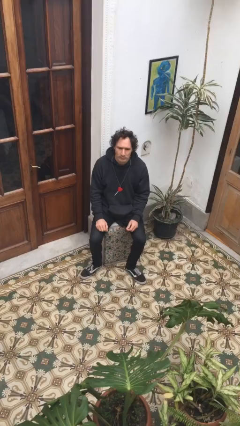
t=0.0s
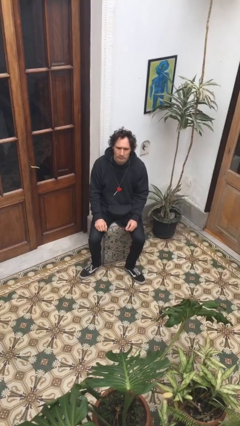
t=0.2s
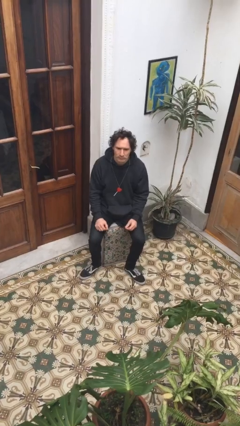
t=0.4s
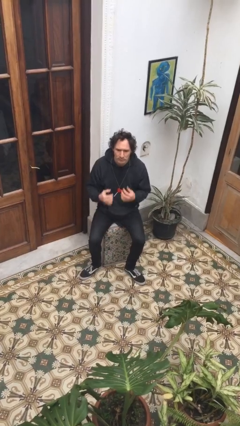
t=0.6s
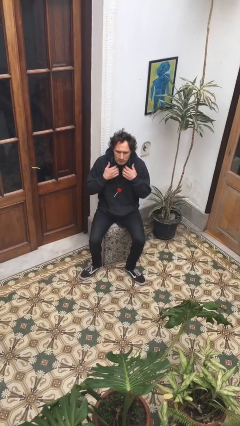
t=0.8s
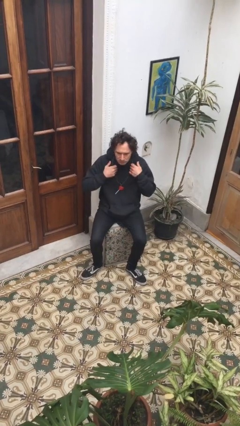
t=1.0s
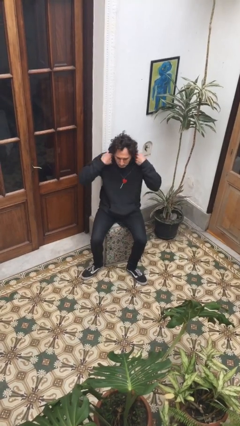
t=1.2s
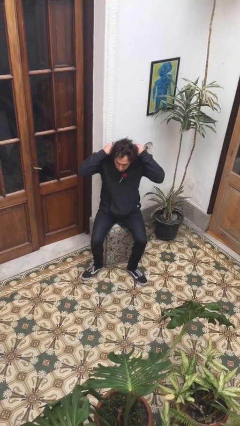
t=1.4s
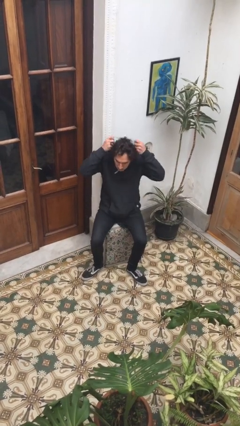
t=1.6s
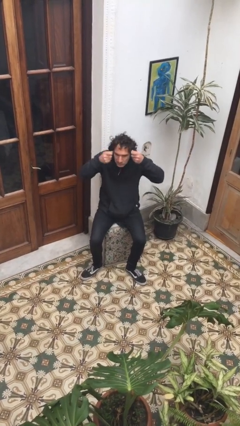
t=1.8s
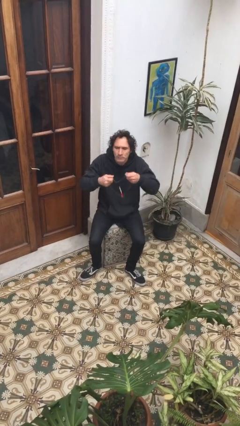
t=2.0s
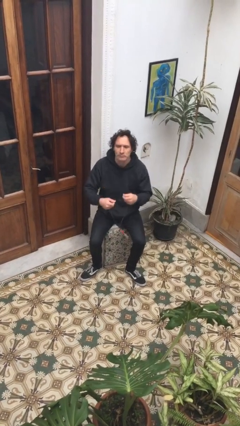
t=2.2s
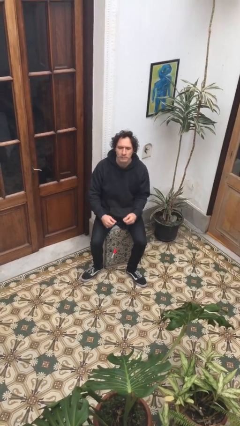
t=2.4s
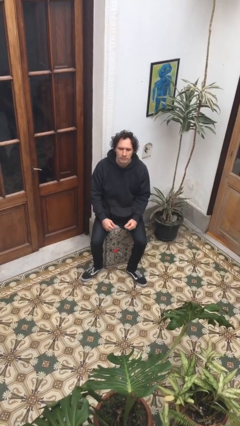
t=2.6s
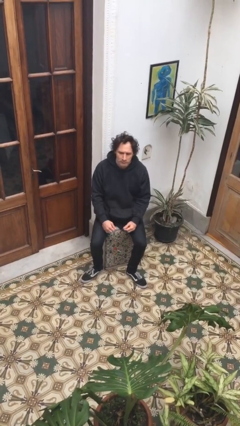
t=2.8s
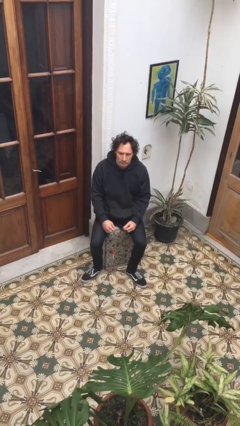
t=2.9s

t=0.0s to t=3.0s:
person takes off necklace

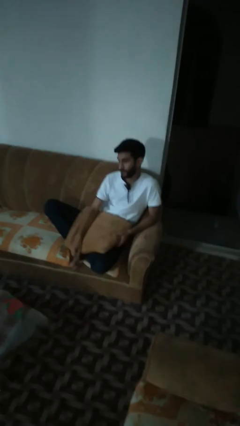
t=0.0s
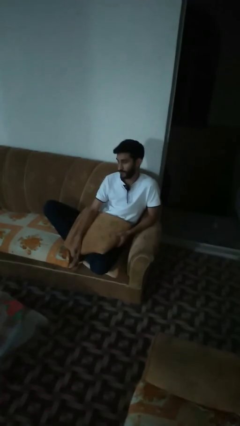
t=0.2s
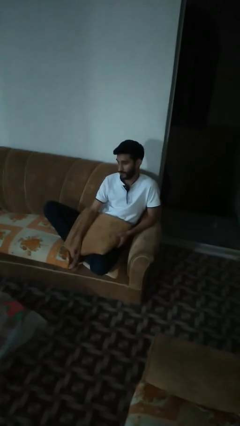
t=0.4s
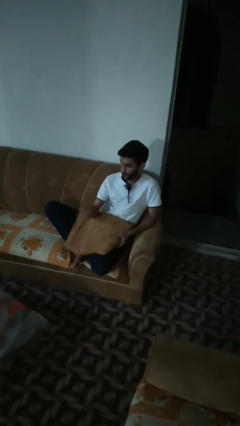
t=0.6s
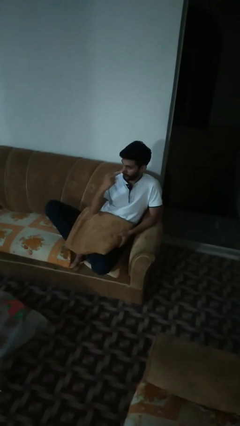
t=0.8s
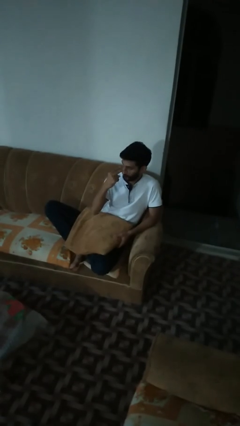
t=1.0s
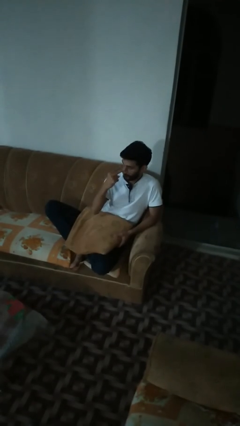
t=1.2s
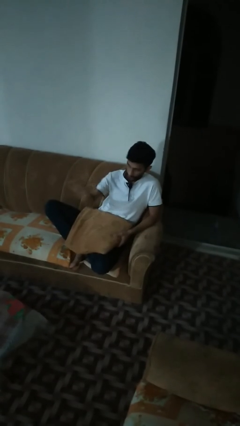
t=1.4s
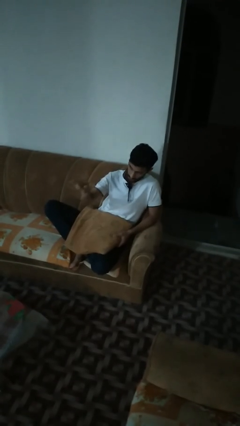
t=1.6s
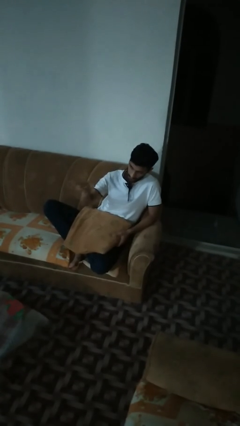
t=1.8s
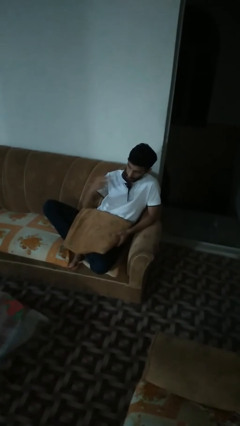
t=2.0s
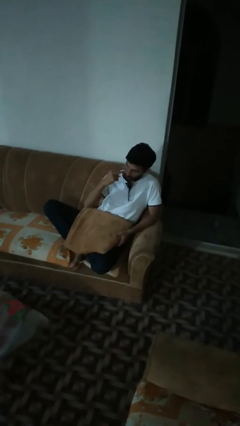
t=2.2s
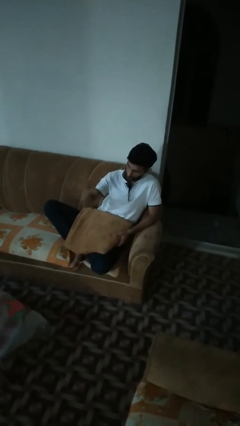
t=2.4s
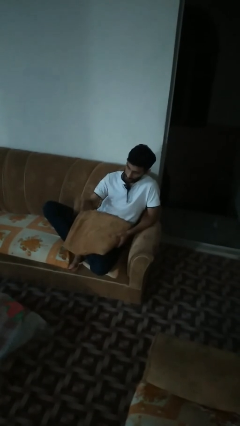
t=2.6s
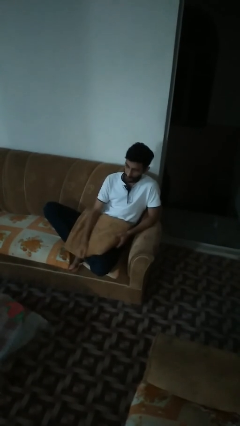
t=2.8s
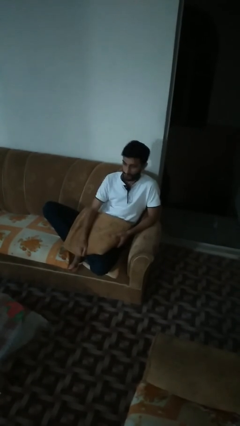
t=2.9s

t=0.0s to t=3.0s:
person gestures watch closely

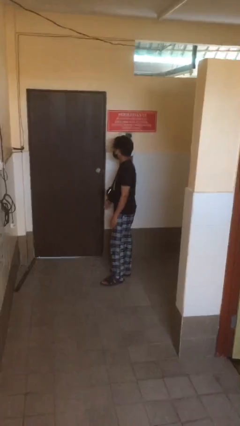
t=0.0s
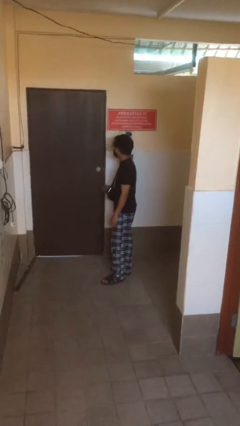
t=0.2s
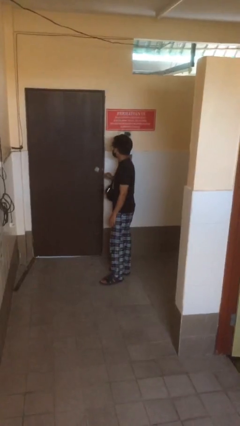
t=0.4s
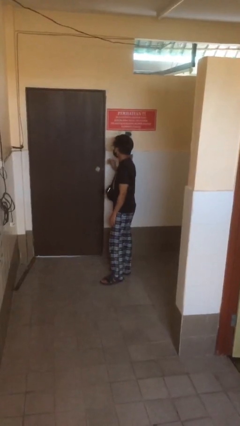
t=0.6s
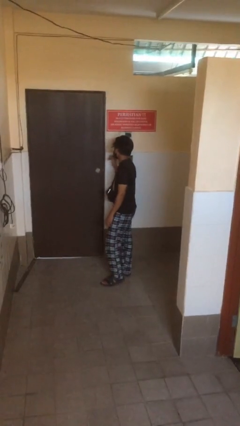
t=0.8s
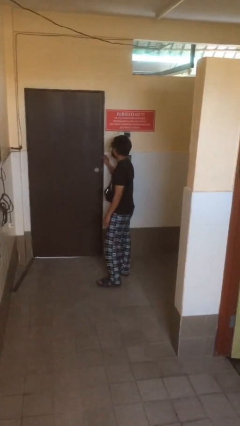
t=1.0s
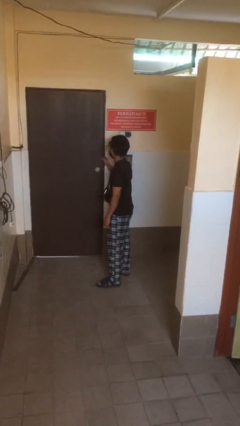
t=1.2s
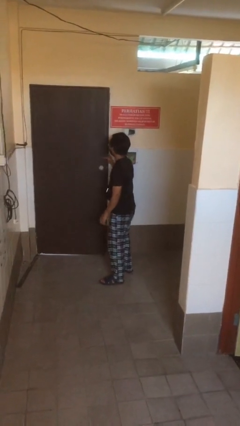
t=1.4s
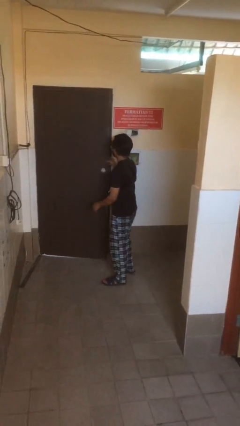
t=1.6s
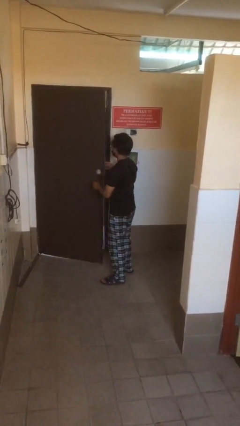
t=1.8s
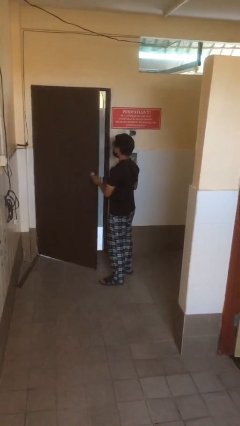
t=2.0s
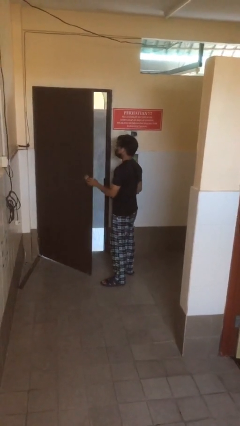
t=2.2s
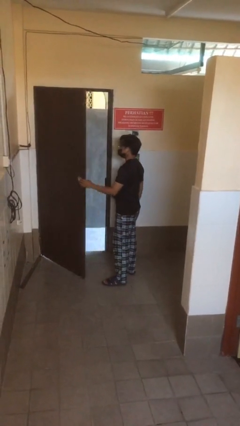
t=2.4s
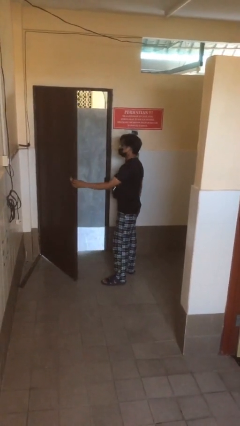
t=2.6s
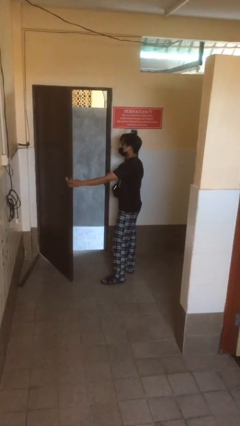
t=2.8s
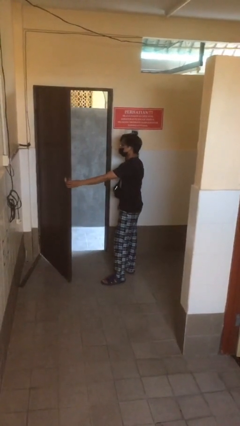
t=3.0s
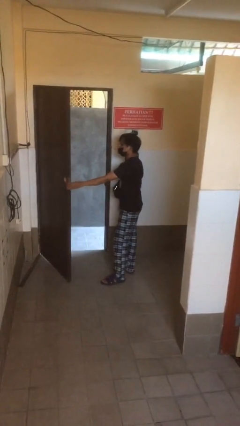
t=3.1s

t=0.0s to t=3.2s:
person opens facility door

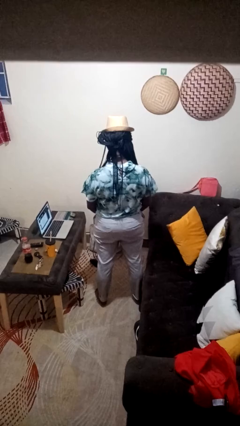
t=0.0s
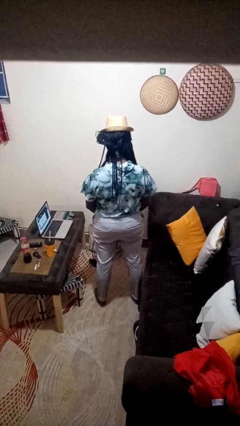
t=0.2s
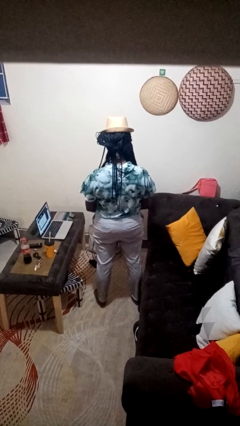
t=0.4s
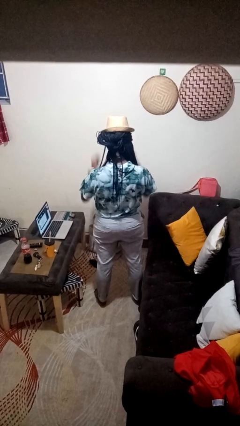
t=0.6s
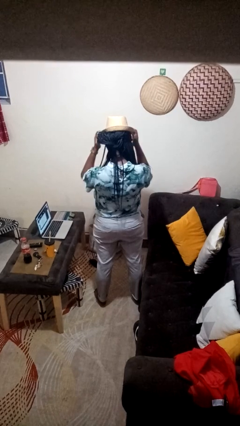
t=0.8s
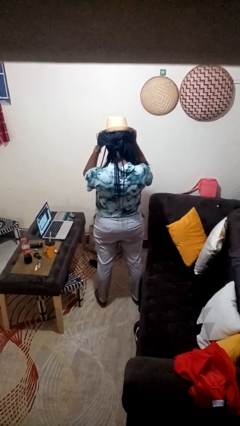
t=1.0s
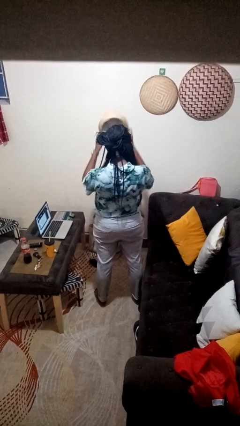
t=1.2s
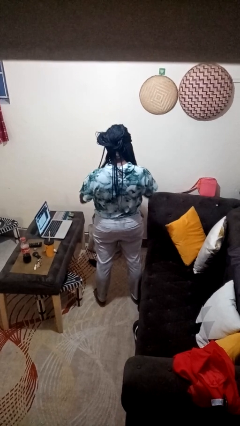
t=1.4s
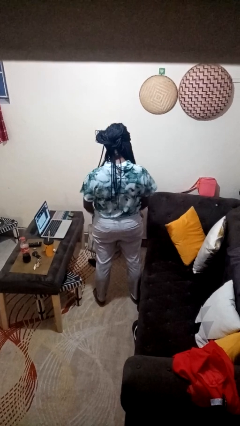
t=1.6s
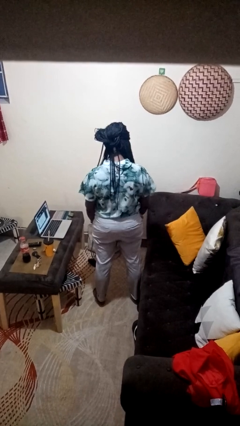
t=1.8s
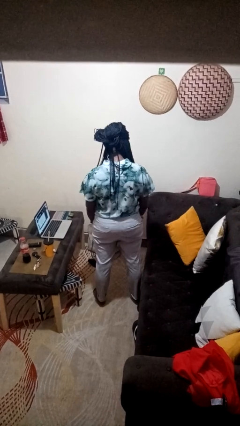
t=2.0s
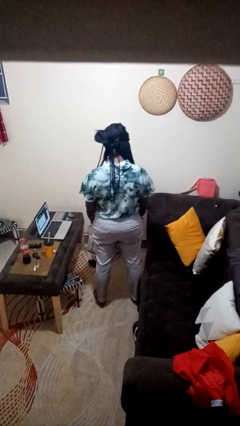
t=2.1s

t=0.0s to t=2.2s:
person takes off hat

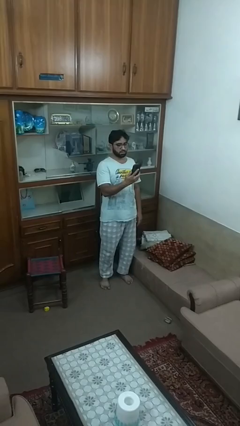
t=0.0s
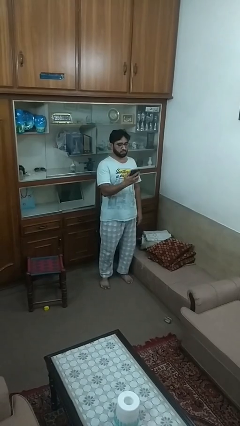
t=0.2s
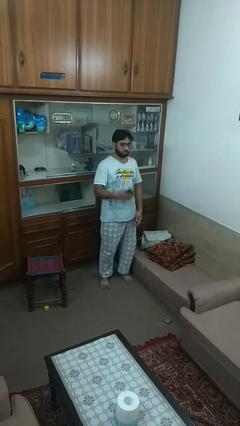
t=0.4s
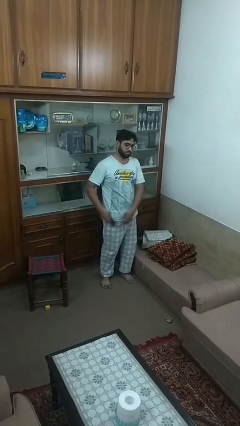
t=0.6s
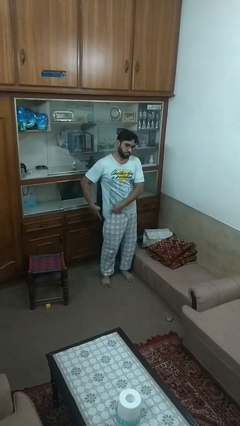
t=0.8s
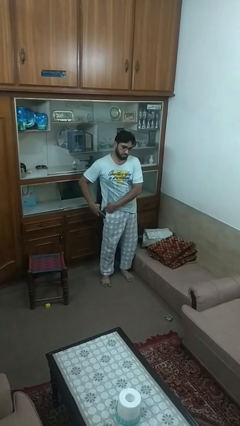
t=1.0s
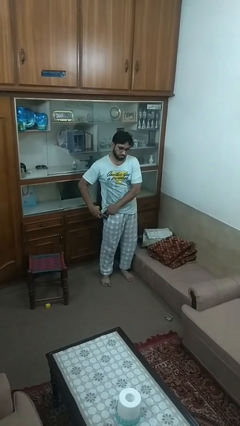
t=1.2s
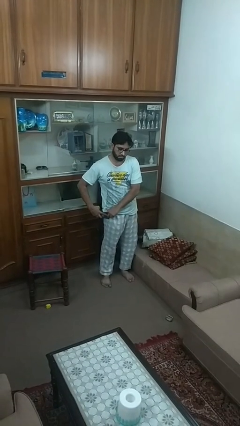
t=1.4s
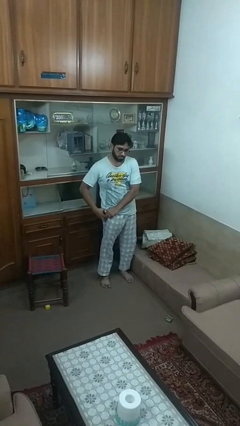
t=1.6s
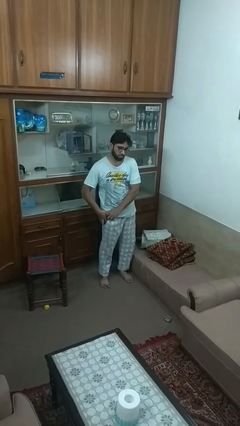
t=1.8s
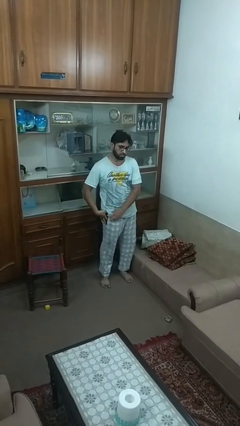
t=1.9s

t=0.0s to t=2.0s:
person puts phone into pocket

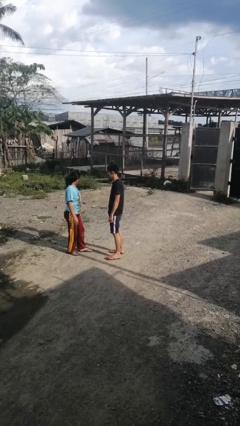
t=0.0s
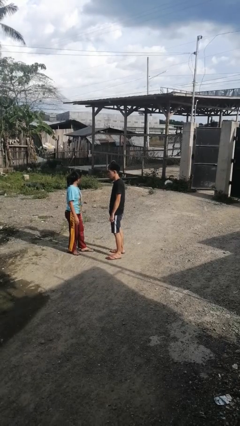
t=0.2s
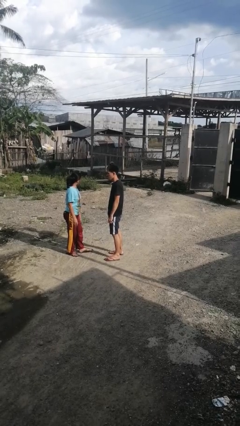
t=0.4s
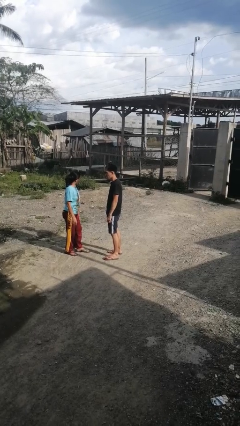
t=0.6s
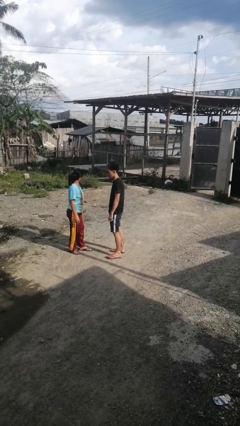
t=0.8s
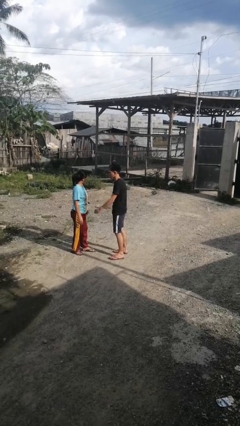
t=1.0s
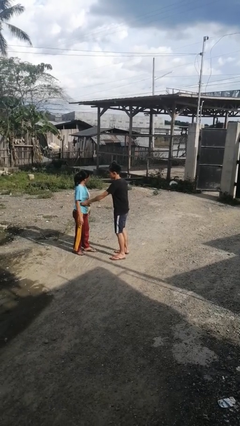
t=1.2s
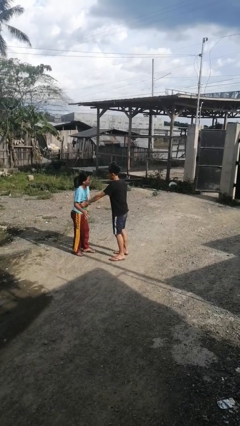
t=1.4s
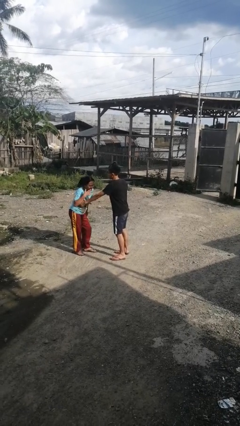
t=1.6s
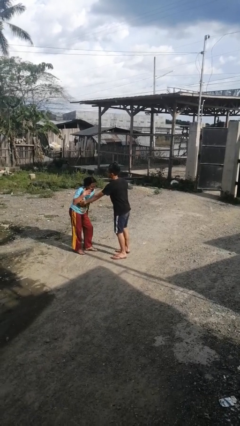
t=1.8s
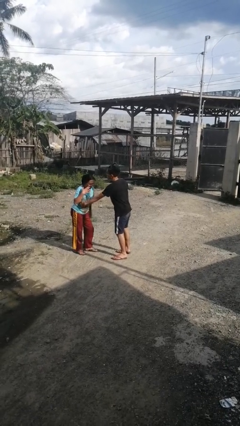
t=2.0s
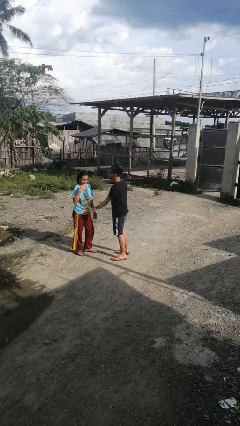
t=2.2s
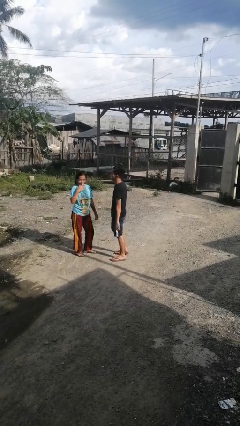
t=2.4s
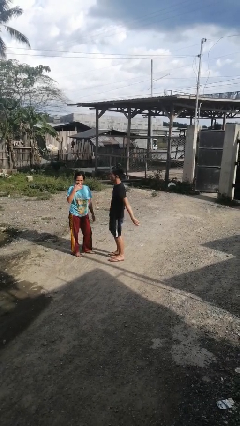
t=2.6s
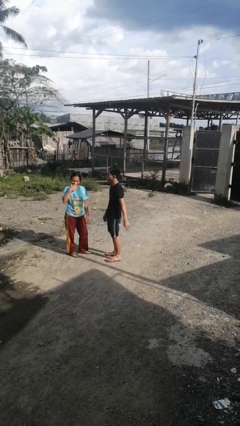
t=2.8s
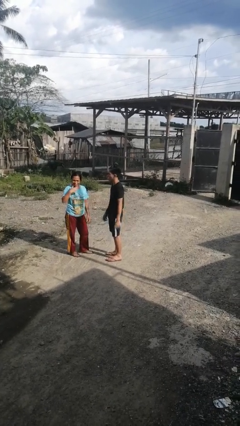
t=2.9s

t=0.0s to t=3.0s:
person tickles person

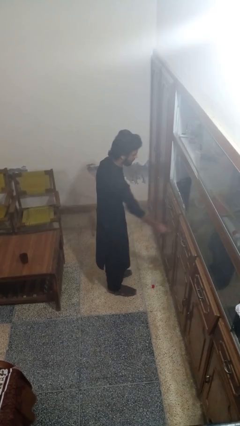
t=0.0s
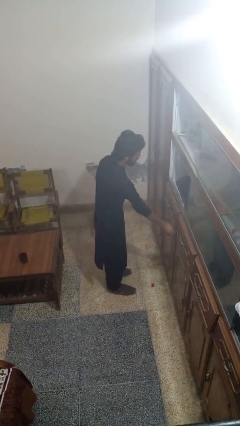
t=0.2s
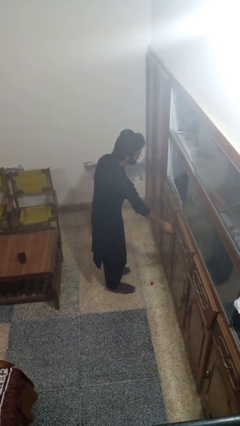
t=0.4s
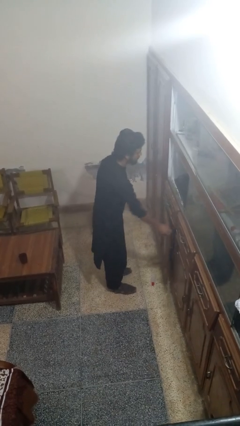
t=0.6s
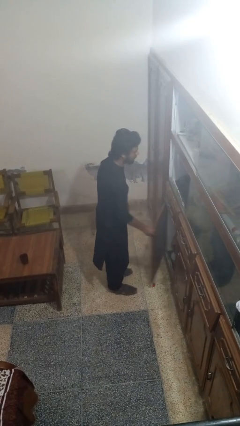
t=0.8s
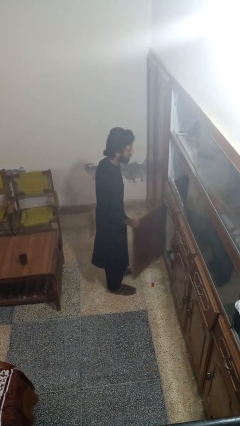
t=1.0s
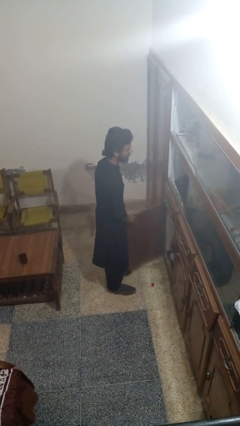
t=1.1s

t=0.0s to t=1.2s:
person opens cabinet
